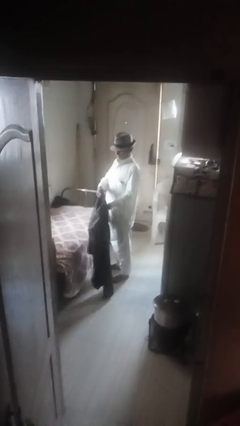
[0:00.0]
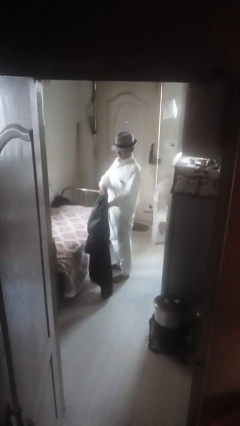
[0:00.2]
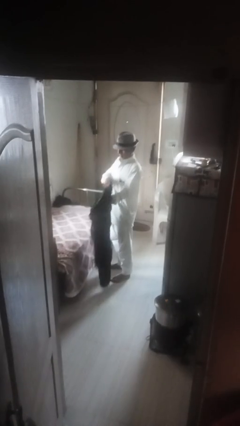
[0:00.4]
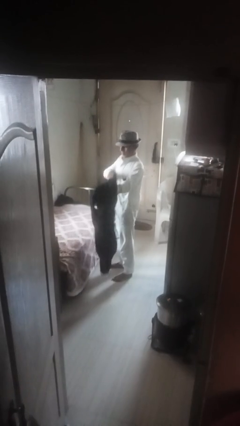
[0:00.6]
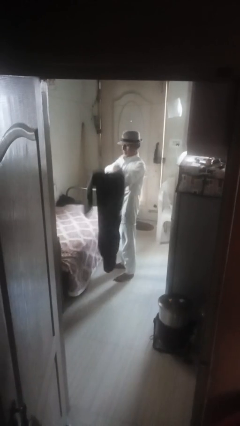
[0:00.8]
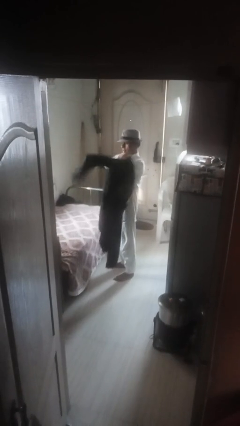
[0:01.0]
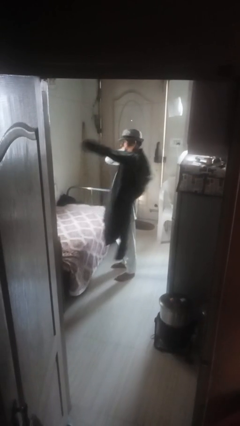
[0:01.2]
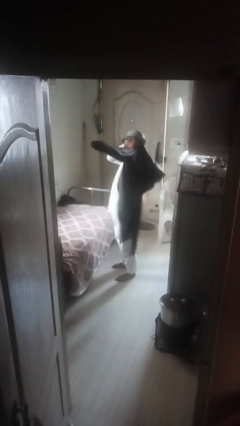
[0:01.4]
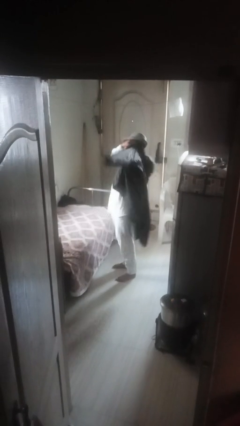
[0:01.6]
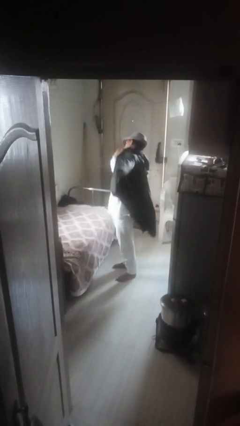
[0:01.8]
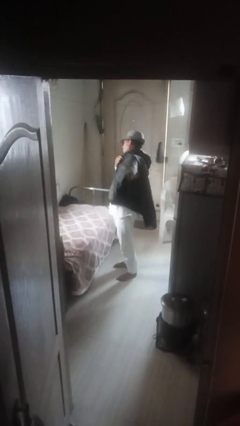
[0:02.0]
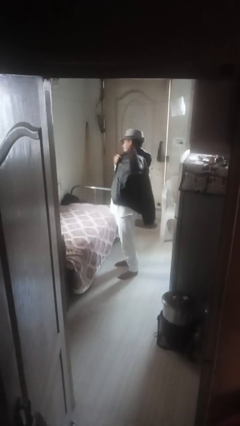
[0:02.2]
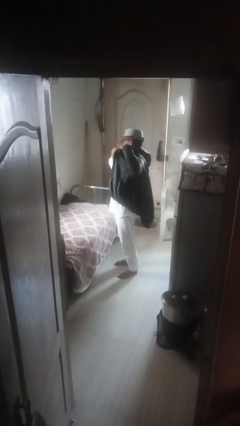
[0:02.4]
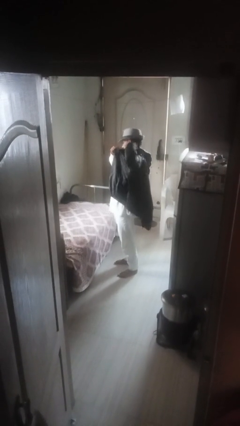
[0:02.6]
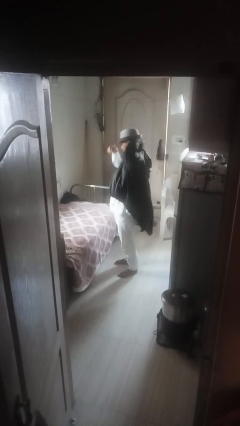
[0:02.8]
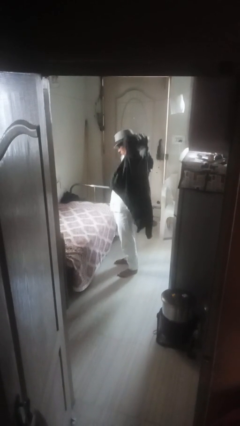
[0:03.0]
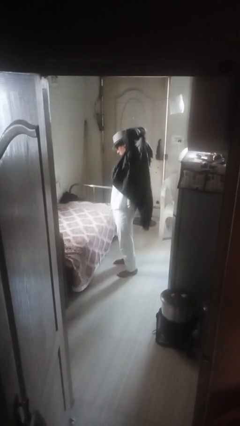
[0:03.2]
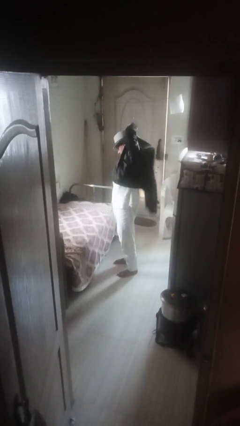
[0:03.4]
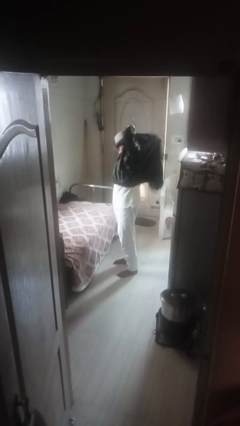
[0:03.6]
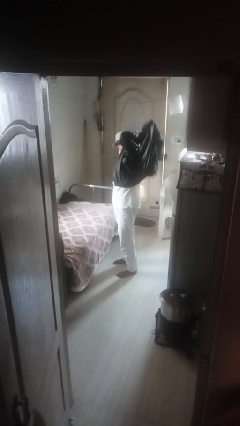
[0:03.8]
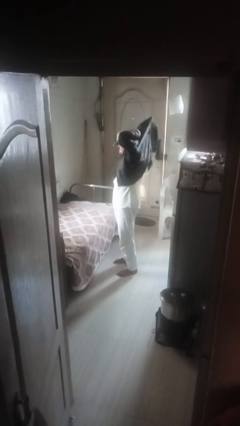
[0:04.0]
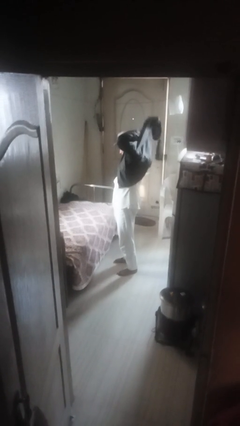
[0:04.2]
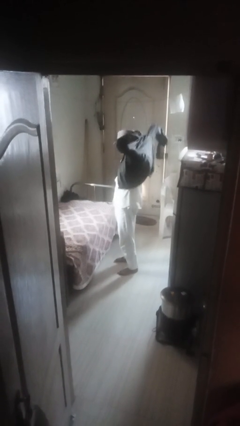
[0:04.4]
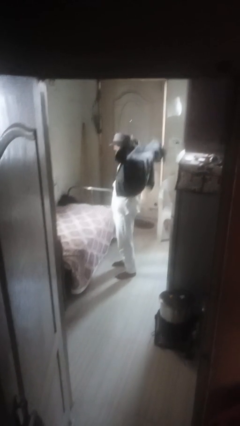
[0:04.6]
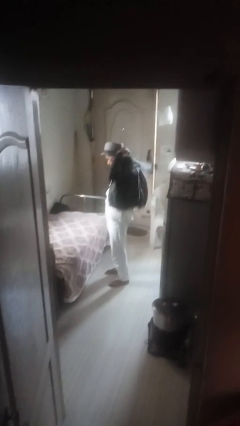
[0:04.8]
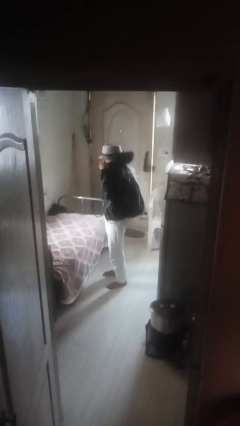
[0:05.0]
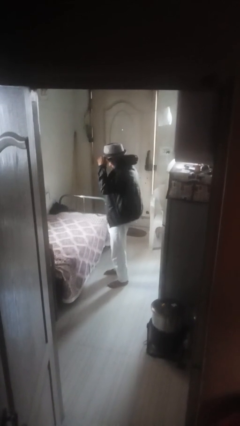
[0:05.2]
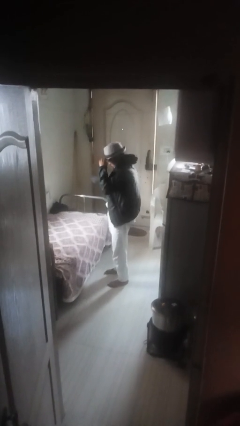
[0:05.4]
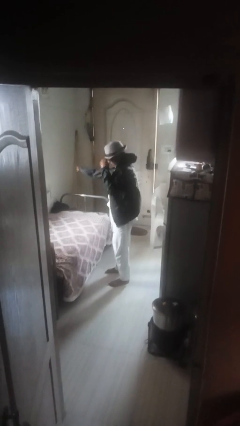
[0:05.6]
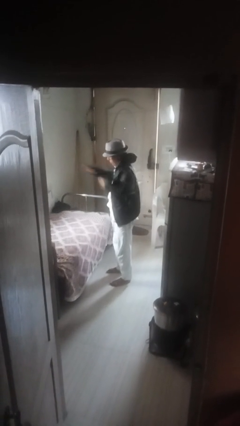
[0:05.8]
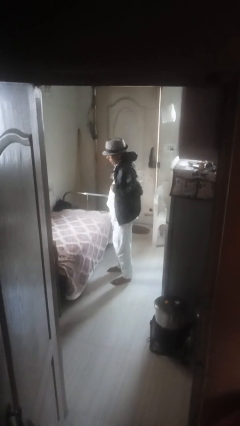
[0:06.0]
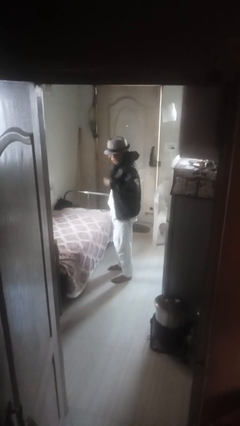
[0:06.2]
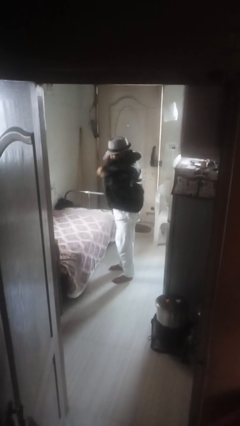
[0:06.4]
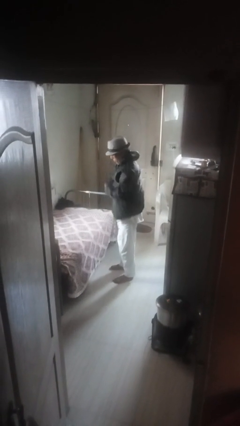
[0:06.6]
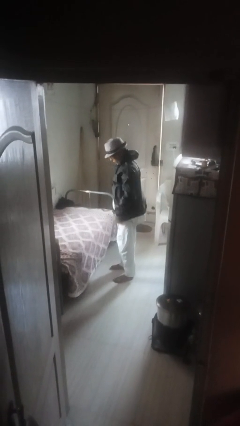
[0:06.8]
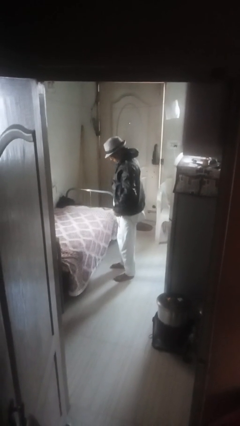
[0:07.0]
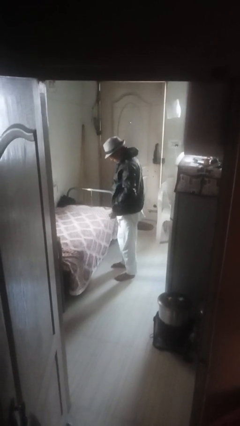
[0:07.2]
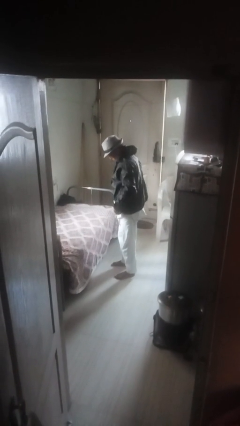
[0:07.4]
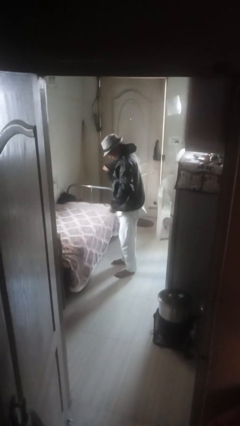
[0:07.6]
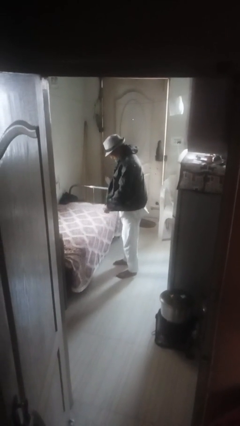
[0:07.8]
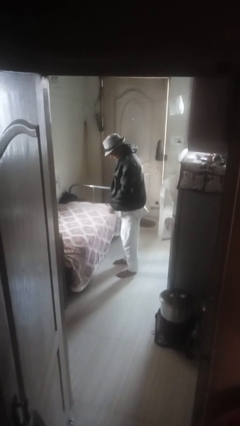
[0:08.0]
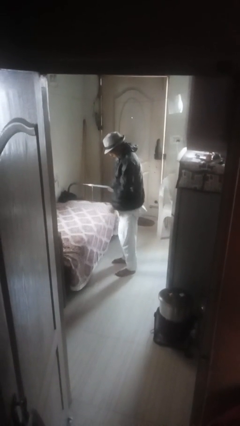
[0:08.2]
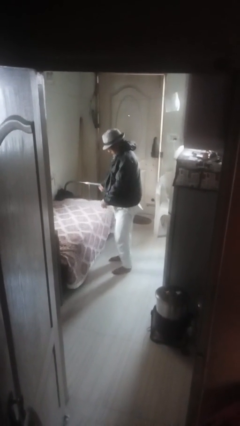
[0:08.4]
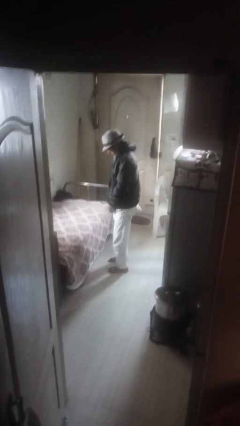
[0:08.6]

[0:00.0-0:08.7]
person puts on jacket

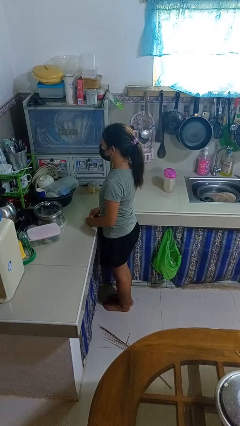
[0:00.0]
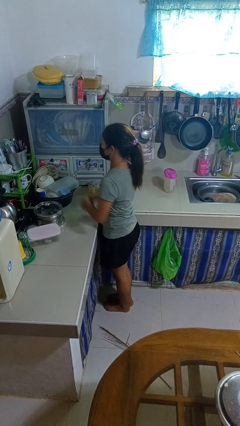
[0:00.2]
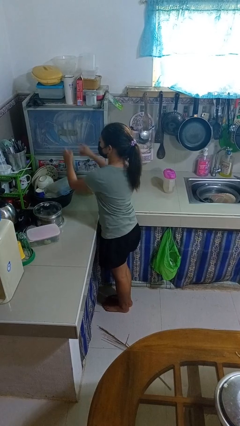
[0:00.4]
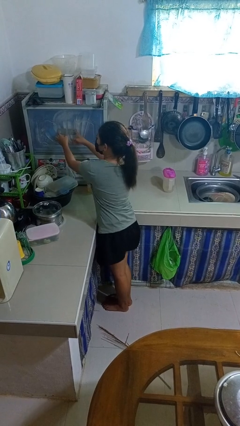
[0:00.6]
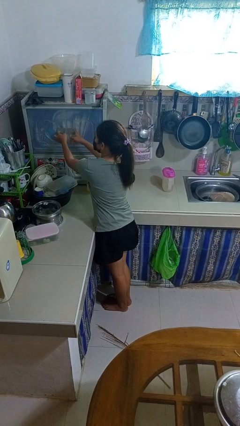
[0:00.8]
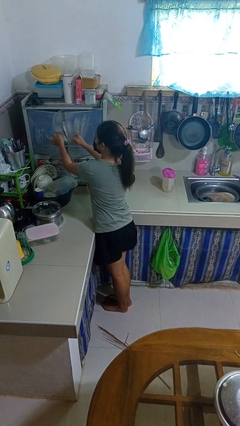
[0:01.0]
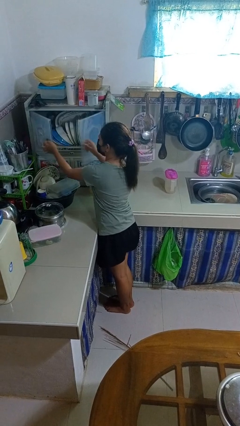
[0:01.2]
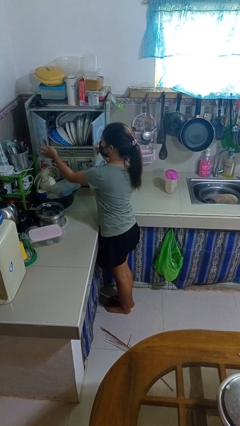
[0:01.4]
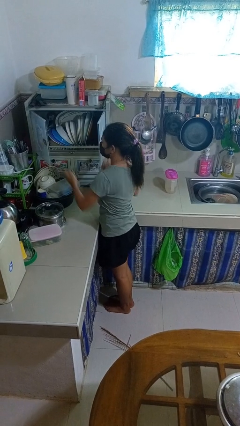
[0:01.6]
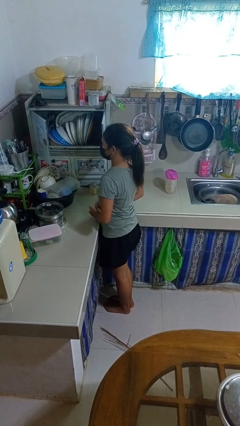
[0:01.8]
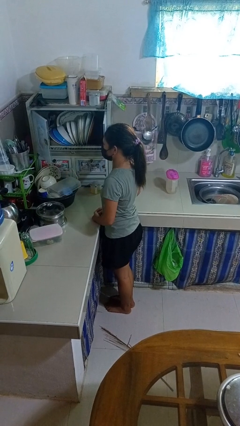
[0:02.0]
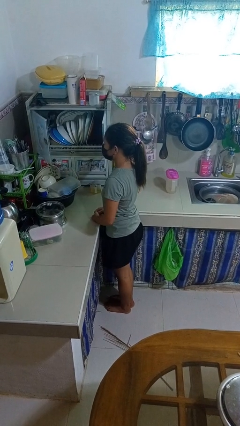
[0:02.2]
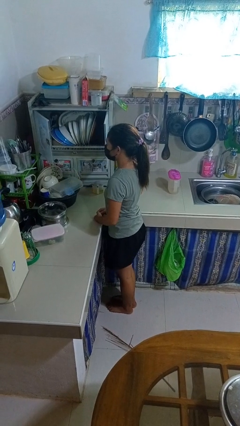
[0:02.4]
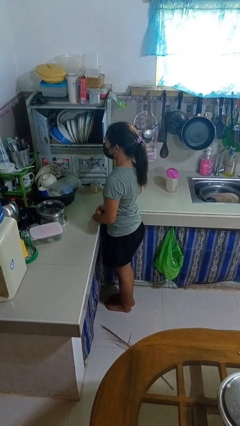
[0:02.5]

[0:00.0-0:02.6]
person opens kitchen drawer

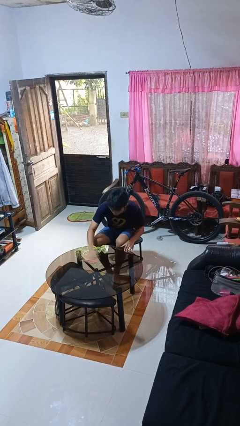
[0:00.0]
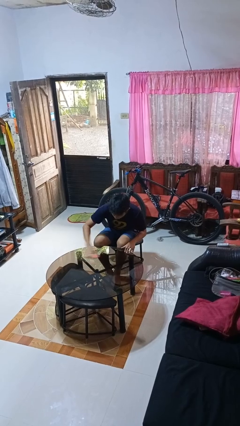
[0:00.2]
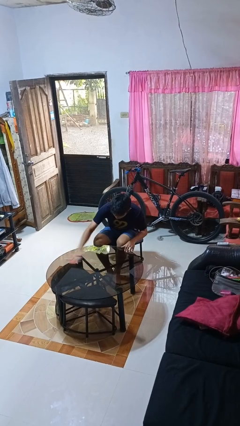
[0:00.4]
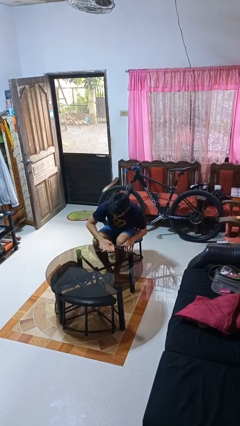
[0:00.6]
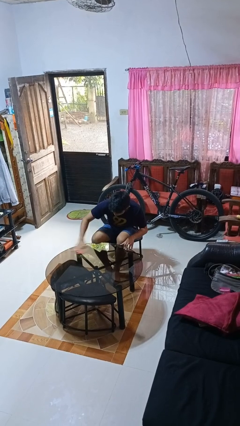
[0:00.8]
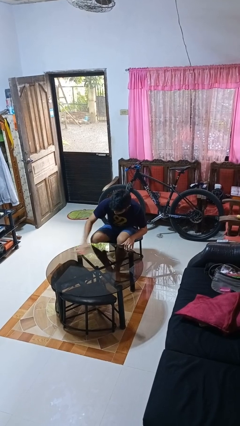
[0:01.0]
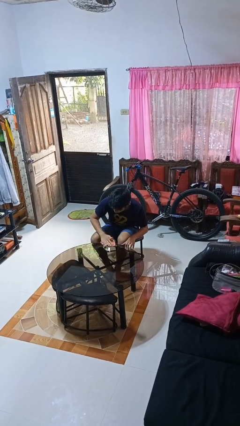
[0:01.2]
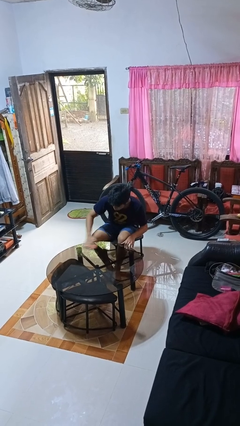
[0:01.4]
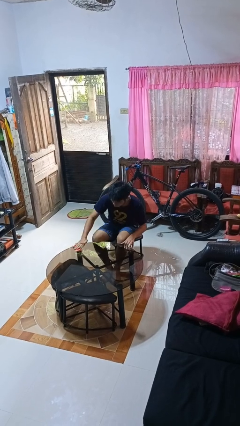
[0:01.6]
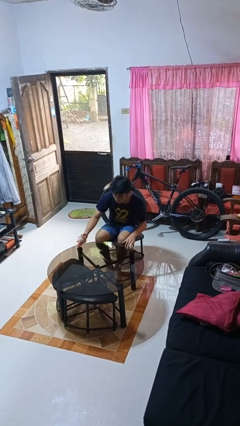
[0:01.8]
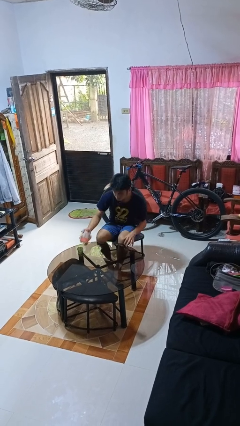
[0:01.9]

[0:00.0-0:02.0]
person cleans table with rag

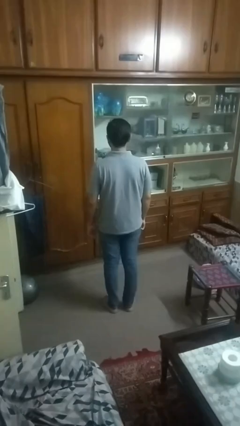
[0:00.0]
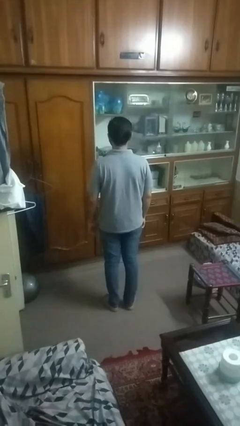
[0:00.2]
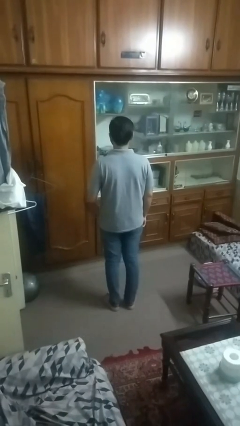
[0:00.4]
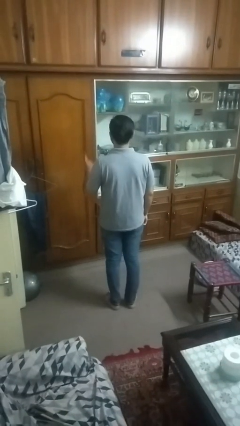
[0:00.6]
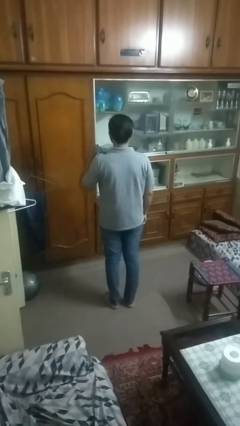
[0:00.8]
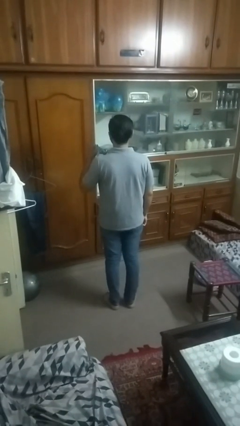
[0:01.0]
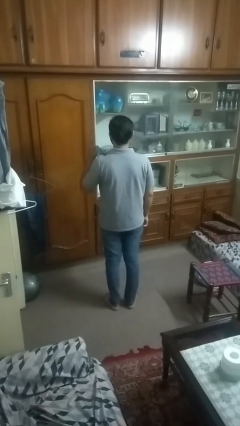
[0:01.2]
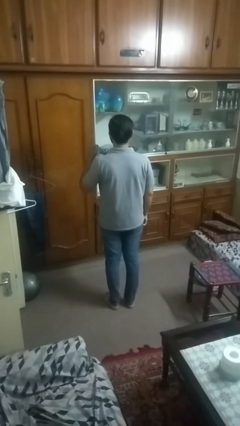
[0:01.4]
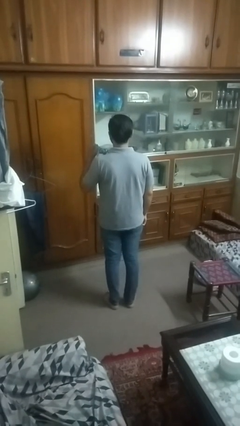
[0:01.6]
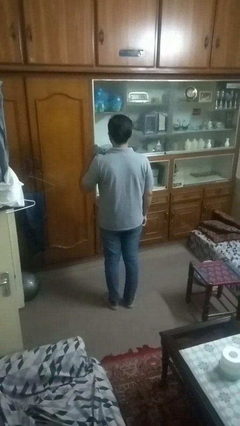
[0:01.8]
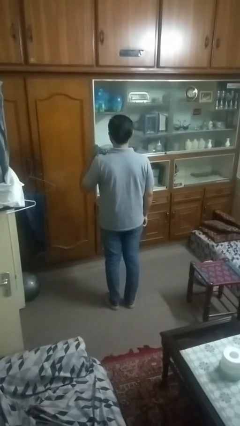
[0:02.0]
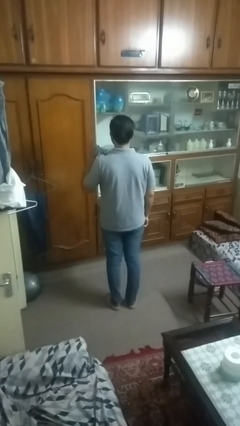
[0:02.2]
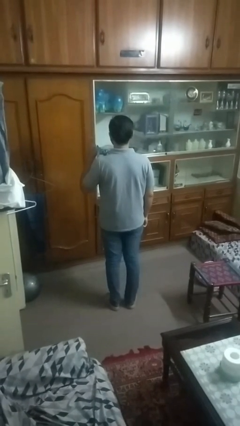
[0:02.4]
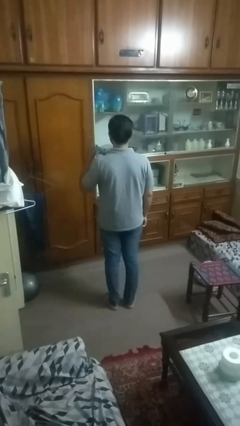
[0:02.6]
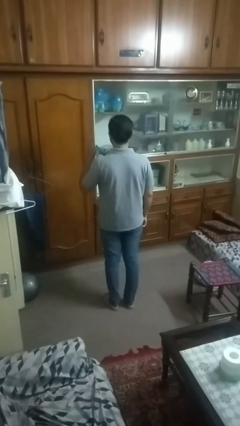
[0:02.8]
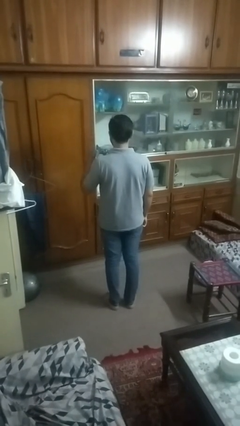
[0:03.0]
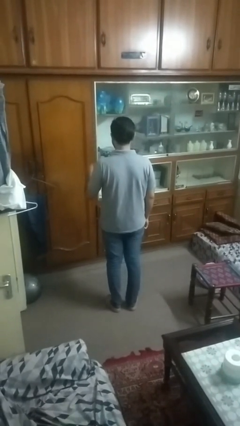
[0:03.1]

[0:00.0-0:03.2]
person gestures number one

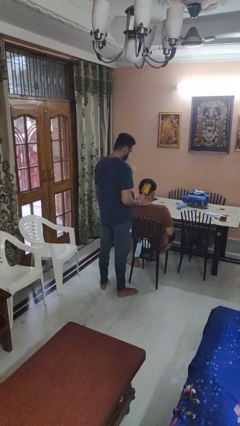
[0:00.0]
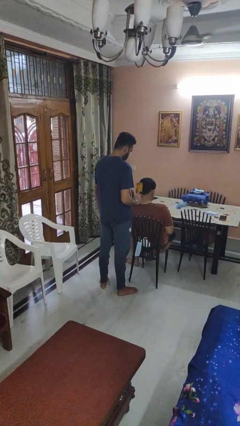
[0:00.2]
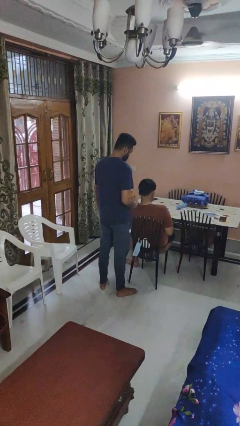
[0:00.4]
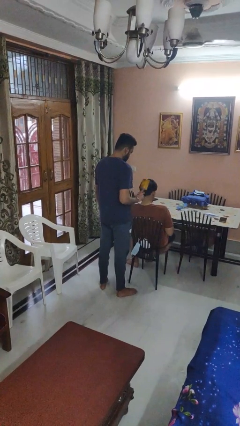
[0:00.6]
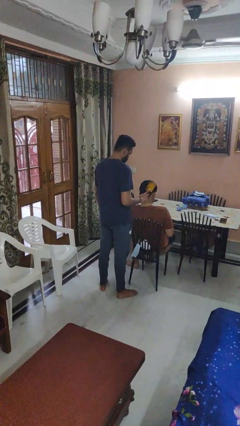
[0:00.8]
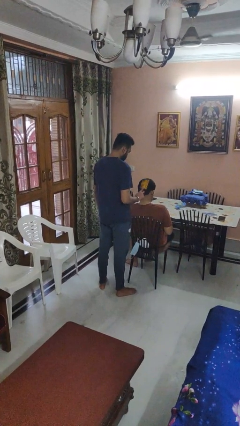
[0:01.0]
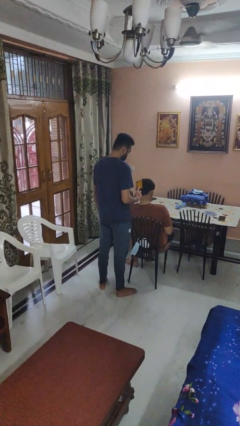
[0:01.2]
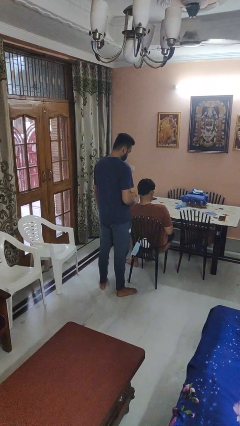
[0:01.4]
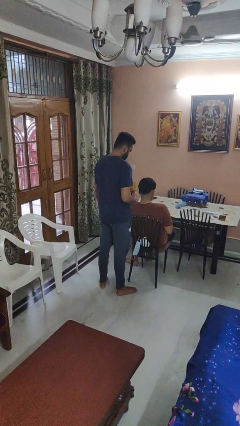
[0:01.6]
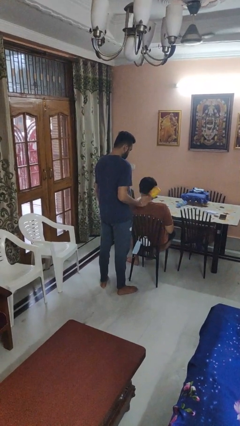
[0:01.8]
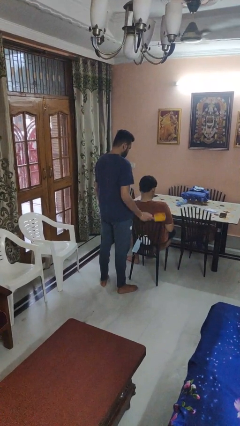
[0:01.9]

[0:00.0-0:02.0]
person brushes hair of person
